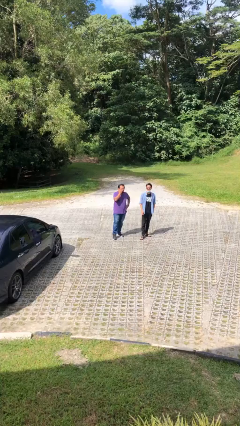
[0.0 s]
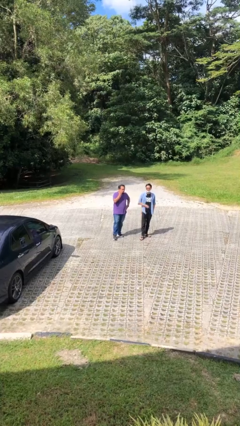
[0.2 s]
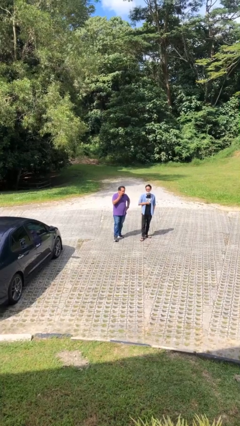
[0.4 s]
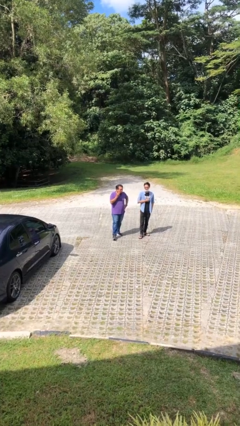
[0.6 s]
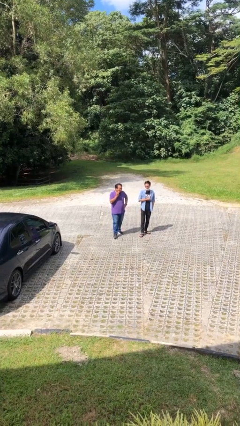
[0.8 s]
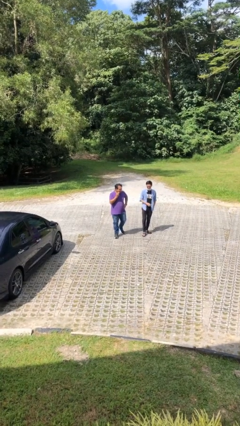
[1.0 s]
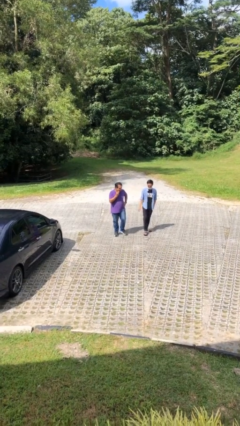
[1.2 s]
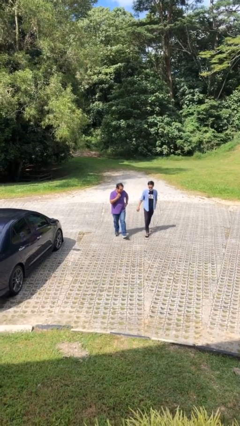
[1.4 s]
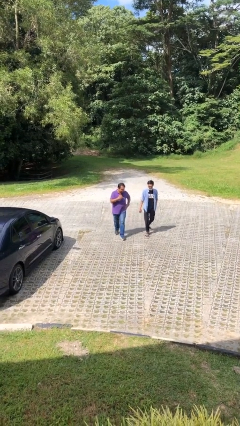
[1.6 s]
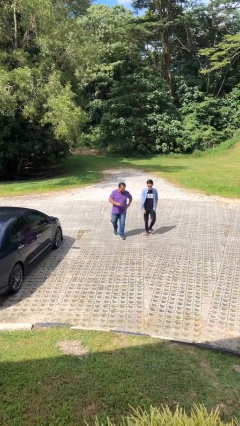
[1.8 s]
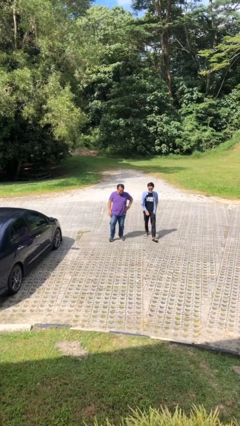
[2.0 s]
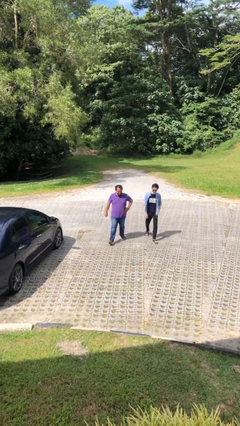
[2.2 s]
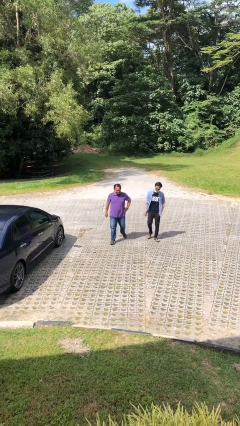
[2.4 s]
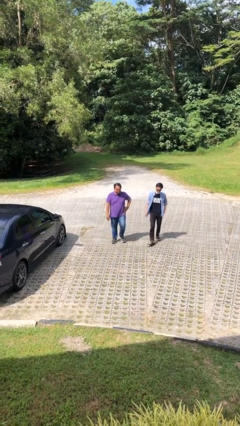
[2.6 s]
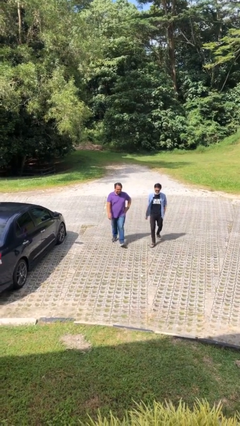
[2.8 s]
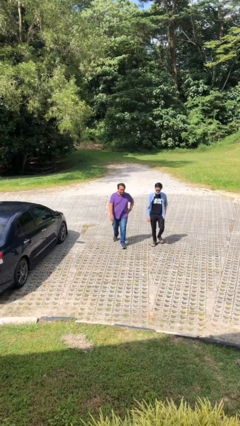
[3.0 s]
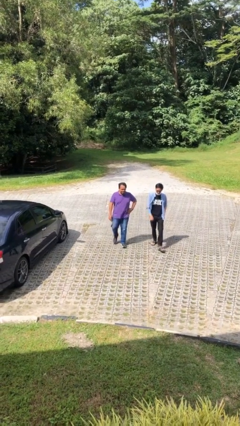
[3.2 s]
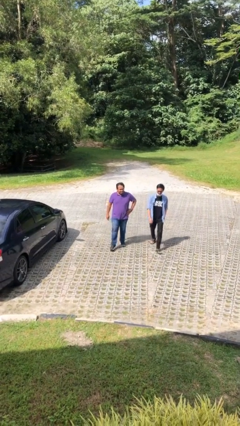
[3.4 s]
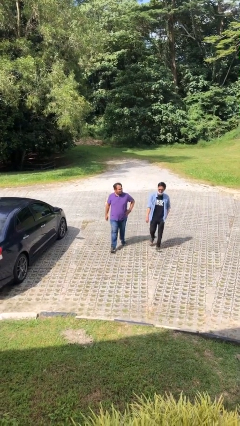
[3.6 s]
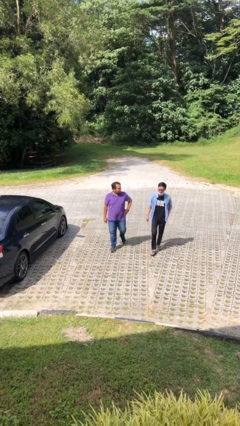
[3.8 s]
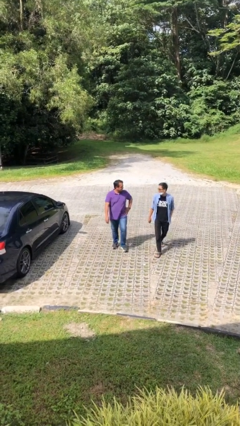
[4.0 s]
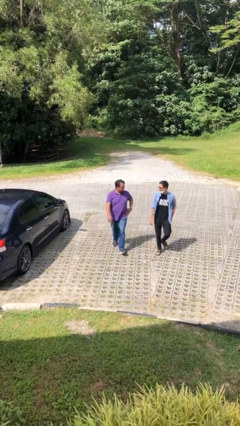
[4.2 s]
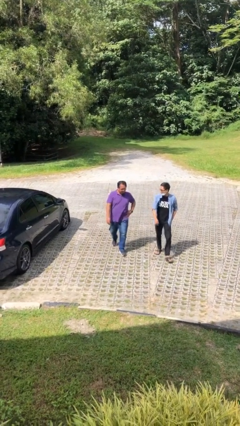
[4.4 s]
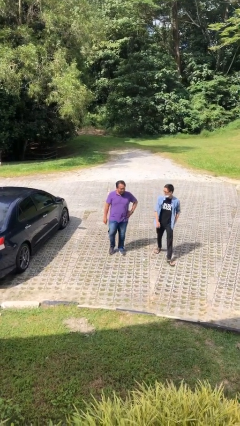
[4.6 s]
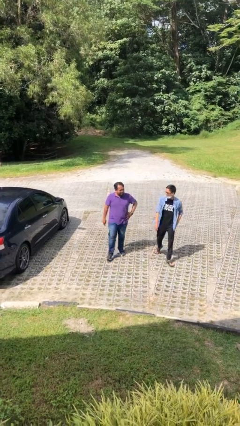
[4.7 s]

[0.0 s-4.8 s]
person talks to person

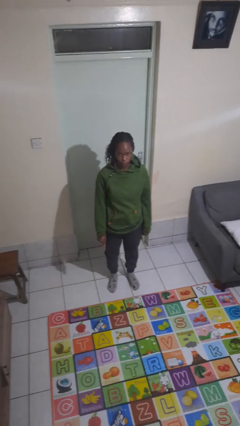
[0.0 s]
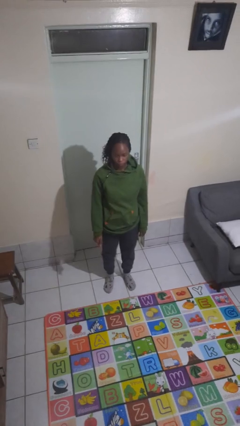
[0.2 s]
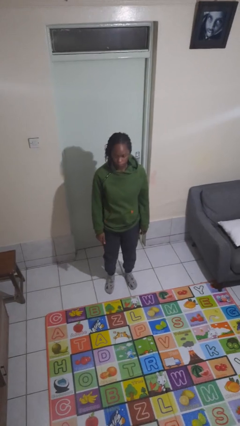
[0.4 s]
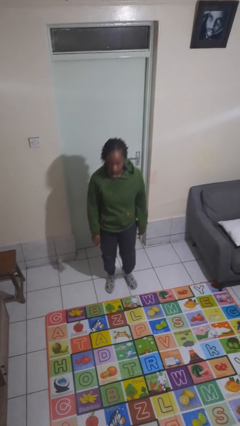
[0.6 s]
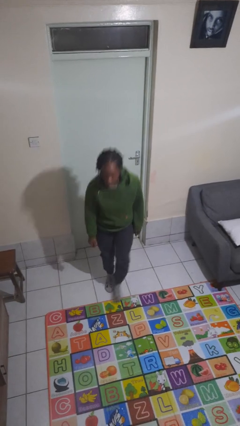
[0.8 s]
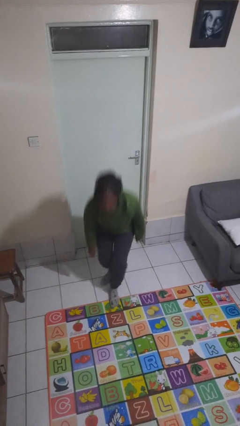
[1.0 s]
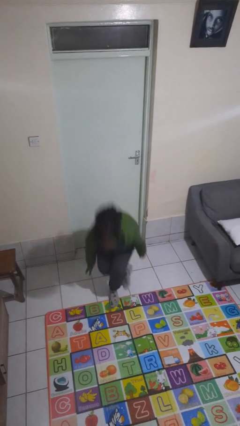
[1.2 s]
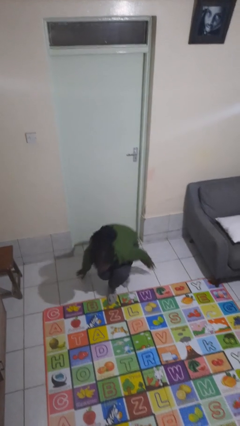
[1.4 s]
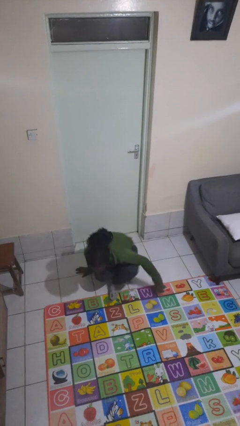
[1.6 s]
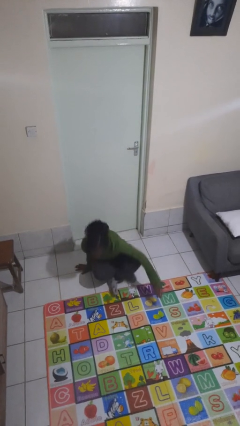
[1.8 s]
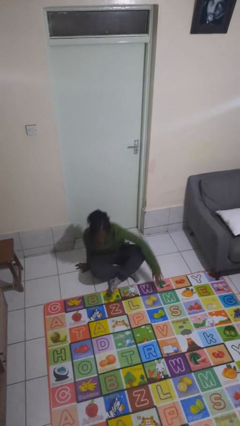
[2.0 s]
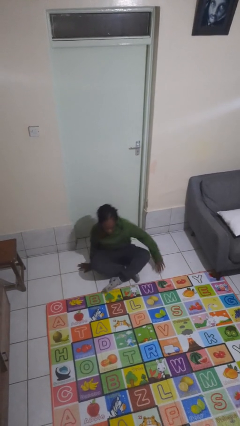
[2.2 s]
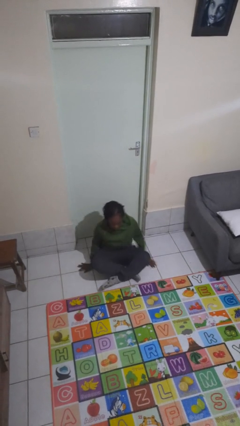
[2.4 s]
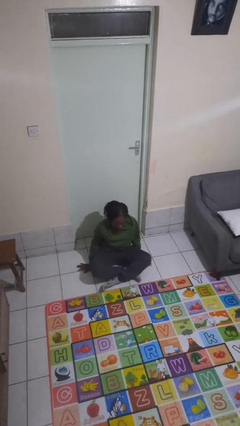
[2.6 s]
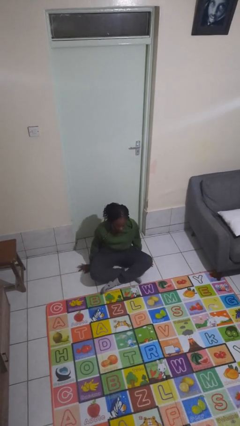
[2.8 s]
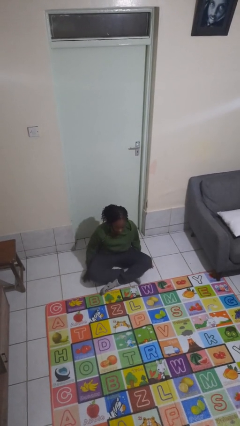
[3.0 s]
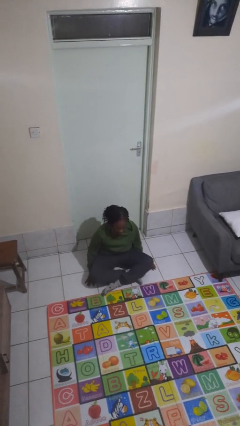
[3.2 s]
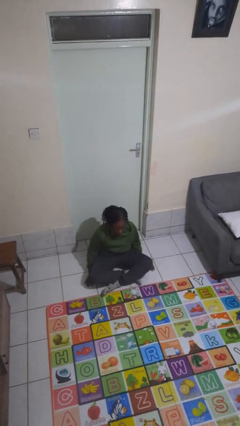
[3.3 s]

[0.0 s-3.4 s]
person sits crisscross

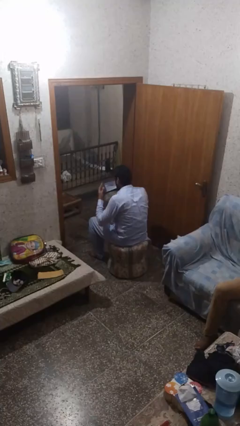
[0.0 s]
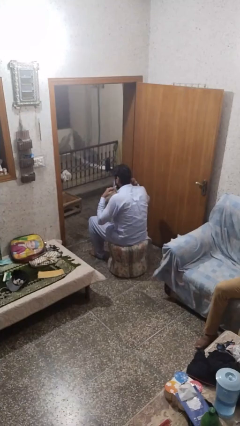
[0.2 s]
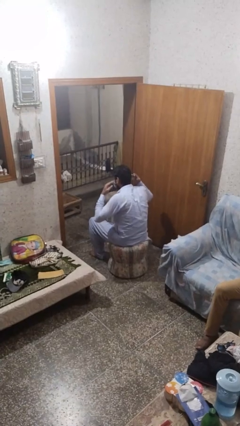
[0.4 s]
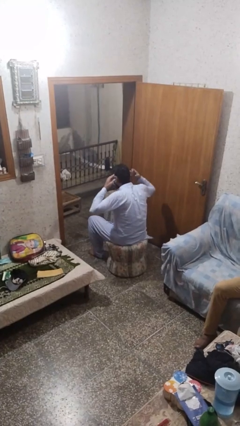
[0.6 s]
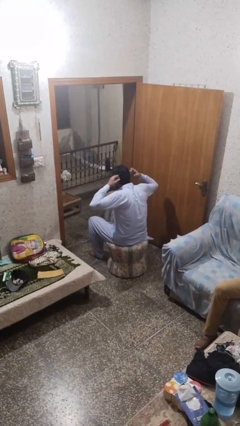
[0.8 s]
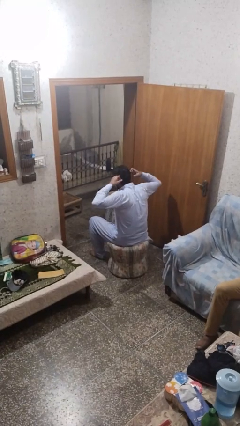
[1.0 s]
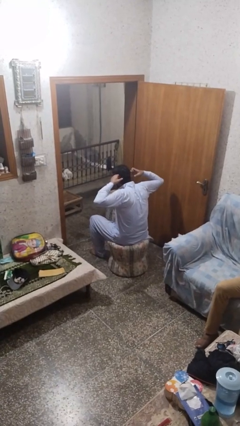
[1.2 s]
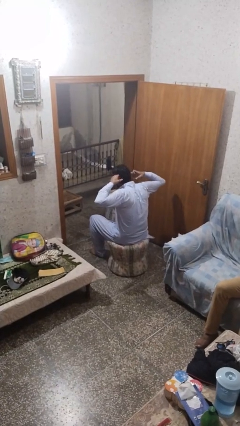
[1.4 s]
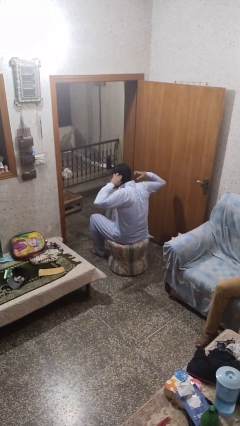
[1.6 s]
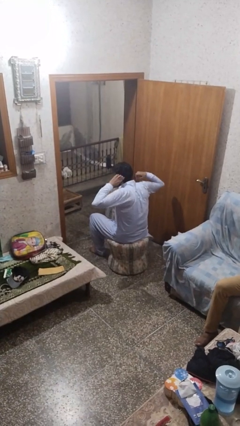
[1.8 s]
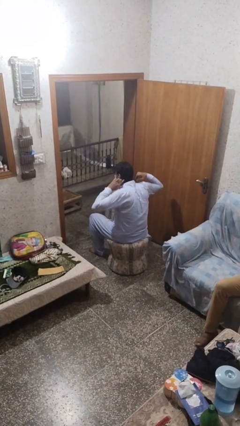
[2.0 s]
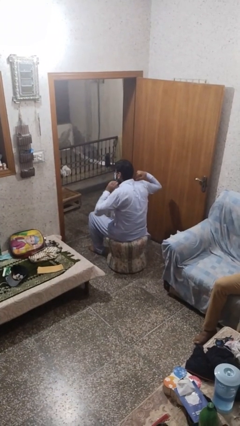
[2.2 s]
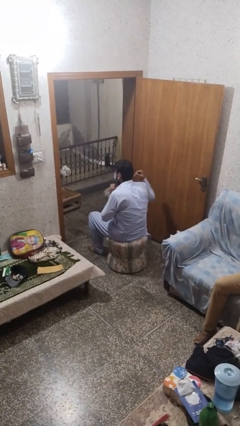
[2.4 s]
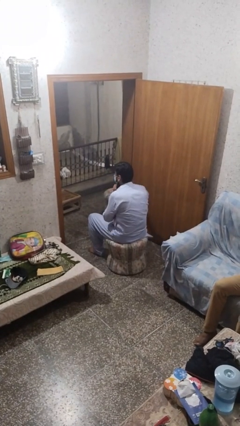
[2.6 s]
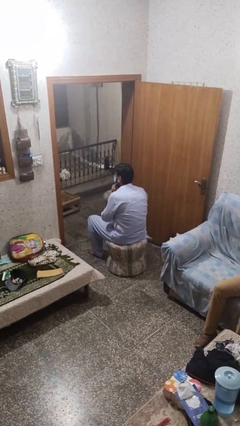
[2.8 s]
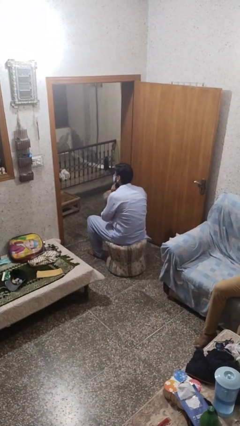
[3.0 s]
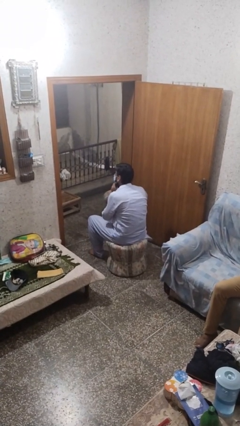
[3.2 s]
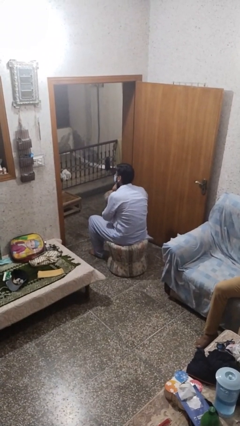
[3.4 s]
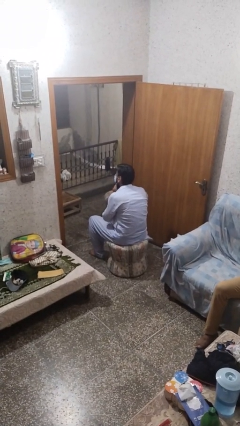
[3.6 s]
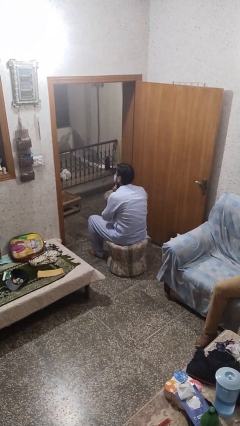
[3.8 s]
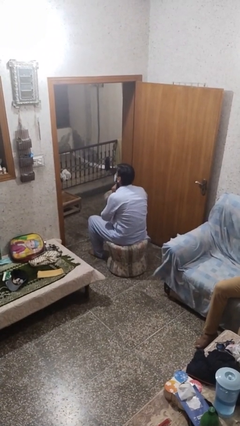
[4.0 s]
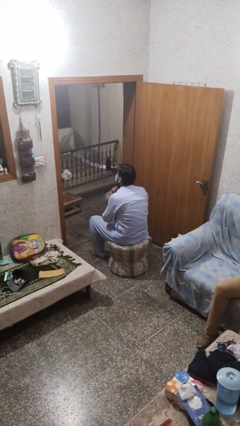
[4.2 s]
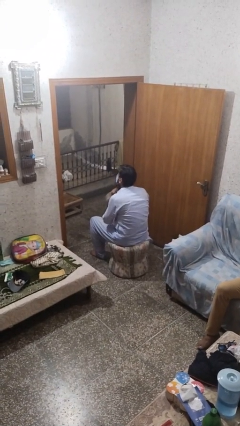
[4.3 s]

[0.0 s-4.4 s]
person puts on facemask

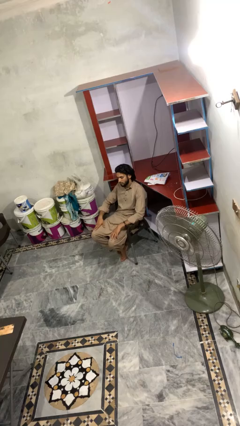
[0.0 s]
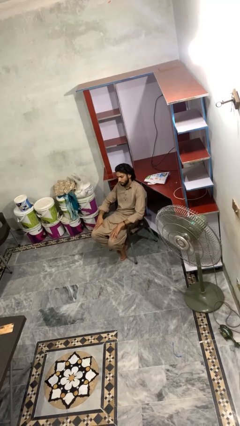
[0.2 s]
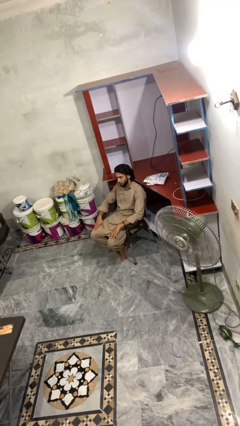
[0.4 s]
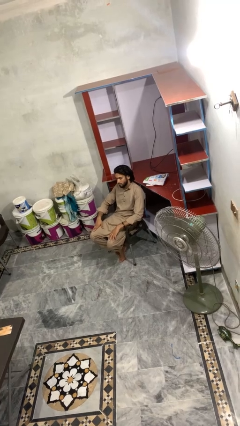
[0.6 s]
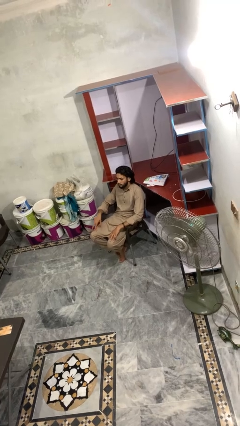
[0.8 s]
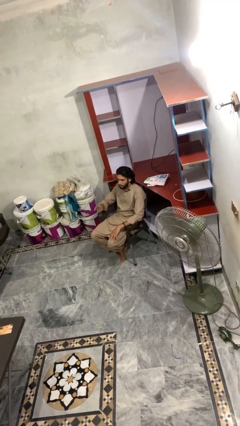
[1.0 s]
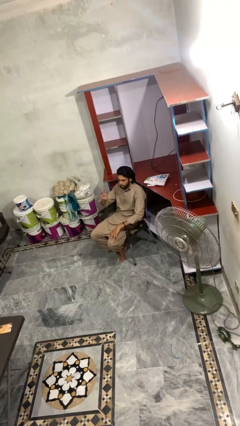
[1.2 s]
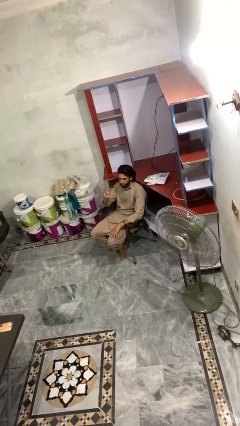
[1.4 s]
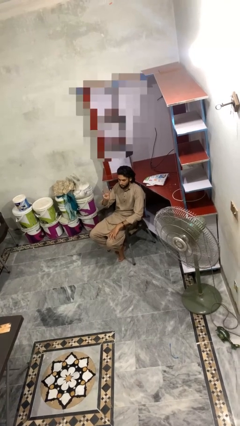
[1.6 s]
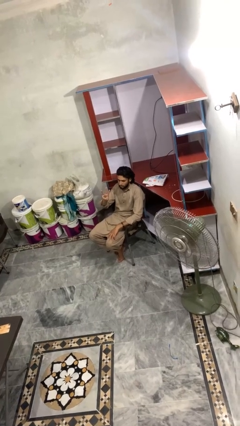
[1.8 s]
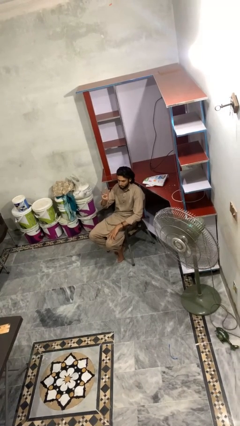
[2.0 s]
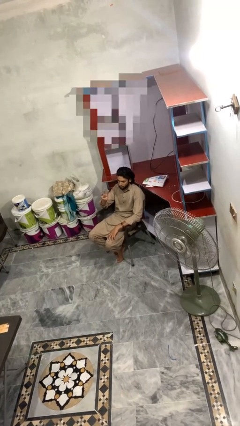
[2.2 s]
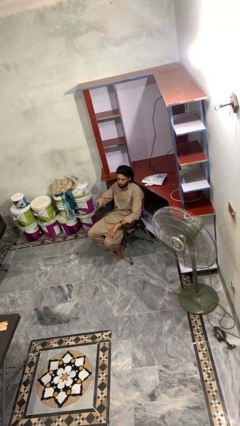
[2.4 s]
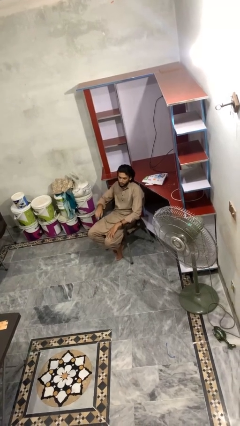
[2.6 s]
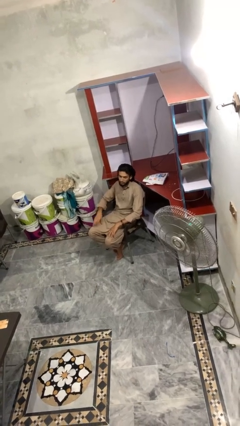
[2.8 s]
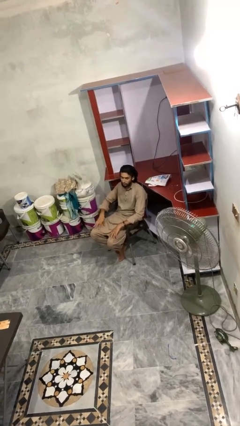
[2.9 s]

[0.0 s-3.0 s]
person gestures number three

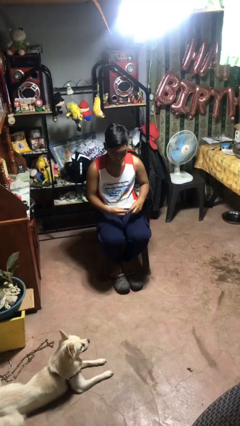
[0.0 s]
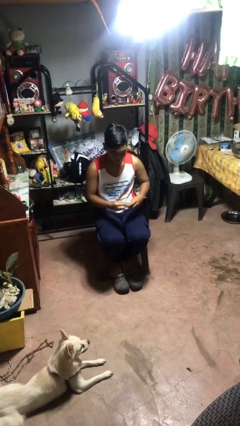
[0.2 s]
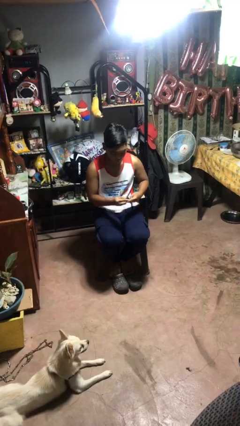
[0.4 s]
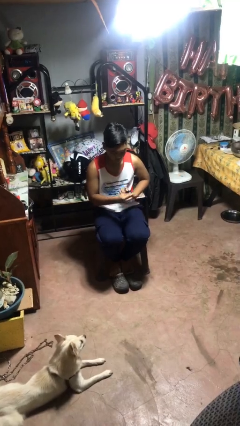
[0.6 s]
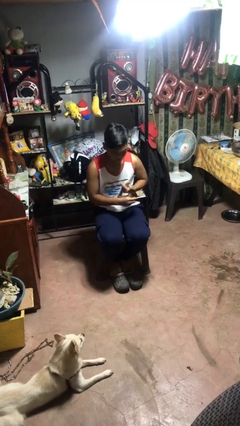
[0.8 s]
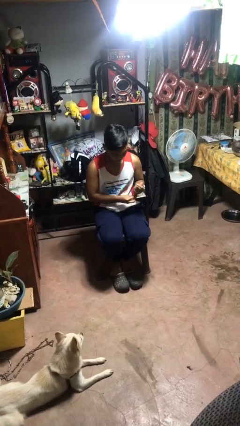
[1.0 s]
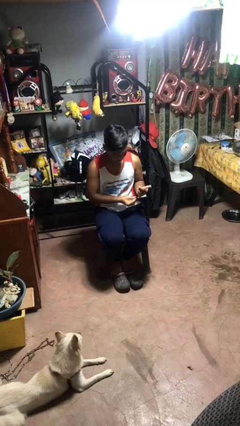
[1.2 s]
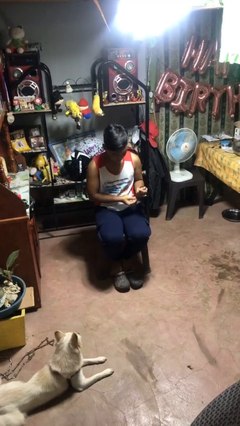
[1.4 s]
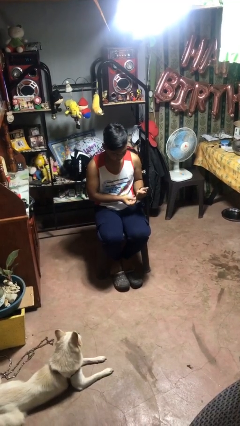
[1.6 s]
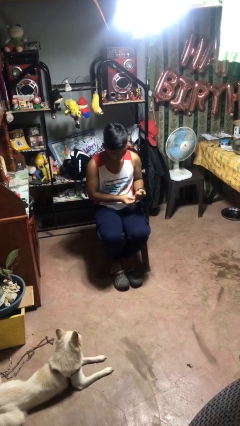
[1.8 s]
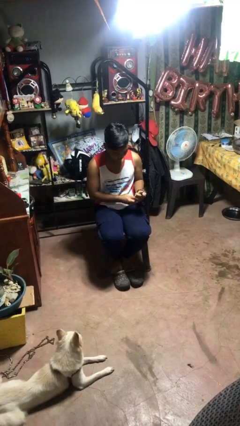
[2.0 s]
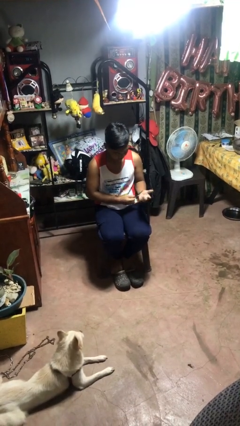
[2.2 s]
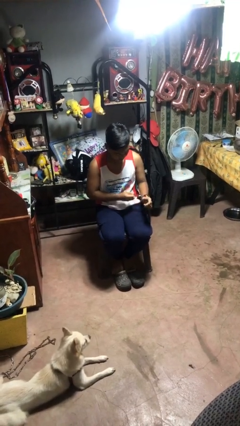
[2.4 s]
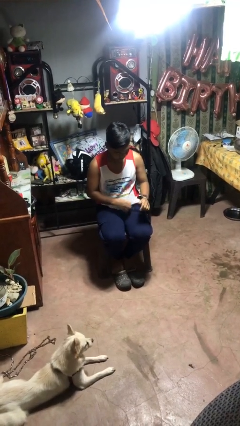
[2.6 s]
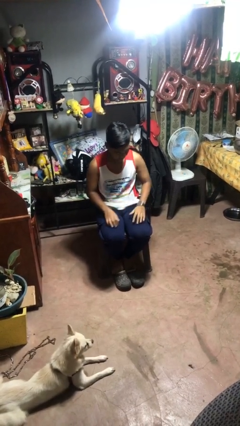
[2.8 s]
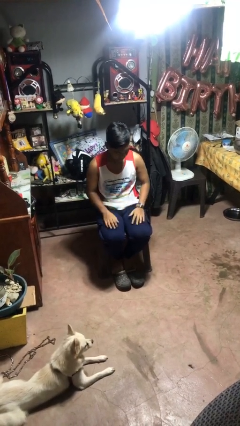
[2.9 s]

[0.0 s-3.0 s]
person puts on wristwatch
